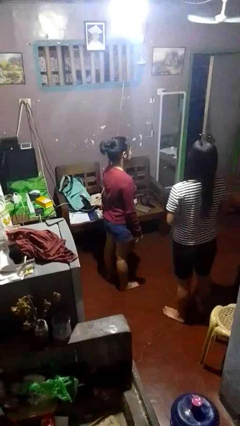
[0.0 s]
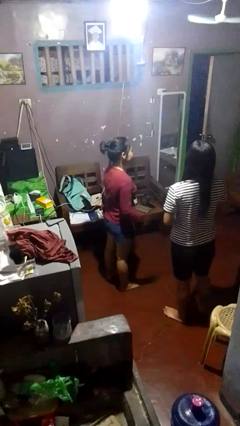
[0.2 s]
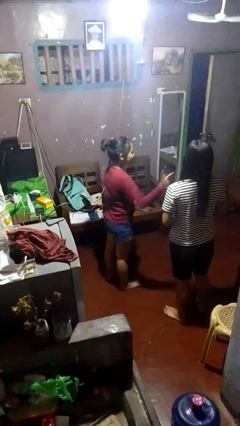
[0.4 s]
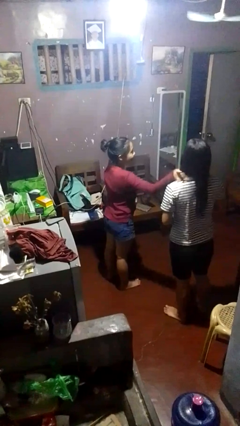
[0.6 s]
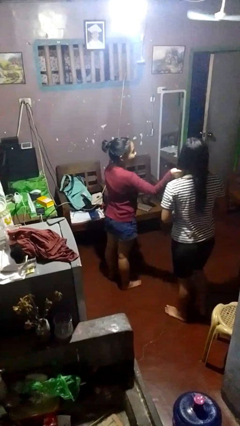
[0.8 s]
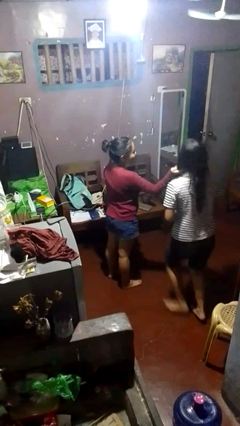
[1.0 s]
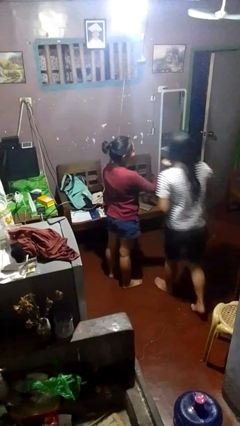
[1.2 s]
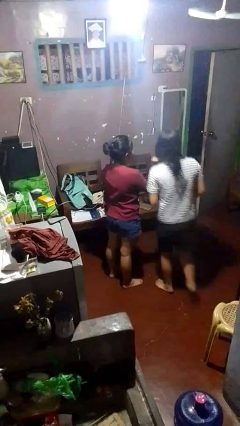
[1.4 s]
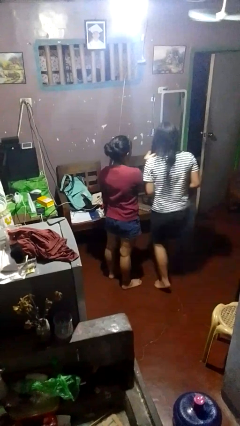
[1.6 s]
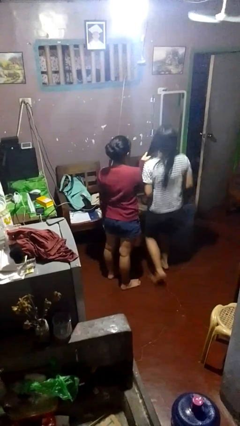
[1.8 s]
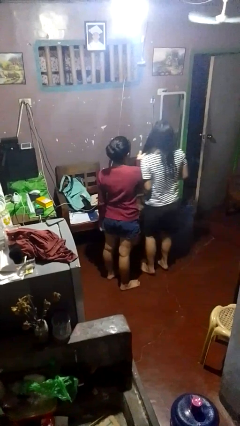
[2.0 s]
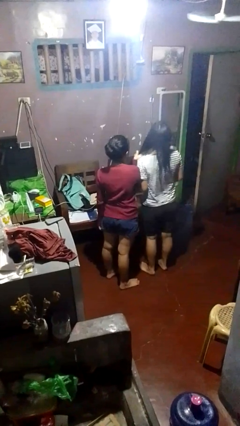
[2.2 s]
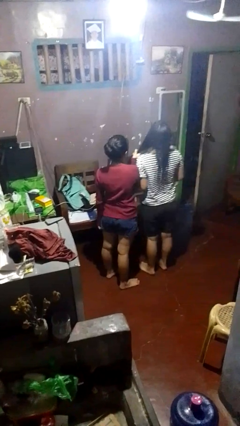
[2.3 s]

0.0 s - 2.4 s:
person grabs person by hair

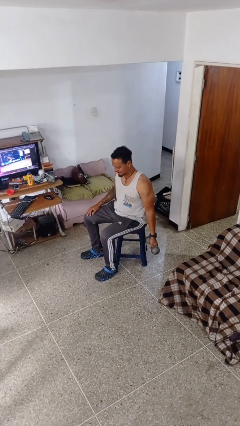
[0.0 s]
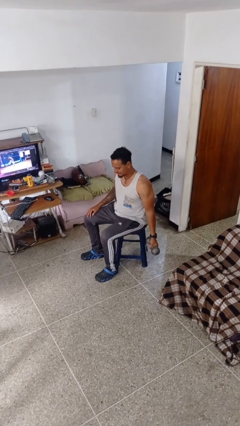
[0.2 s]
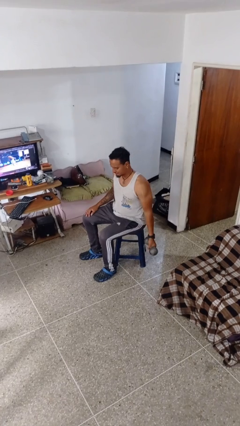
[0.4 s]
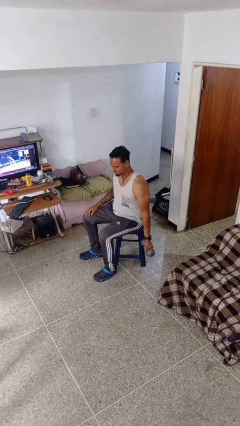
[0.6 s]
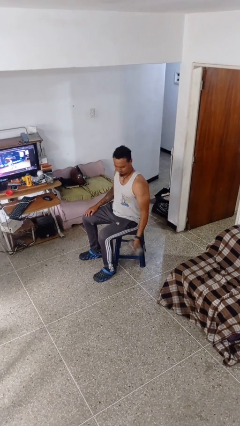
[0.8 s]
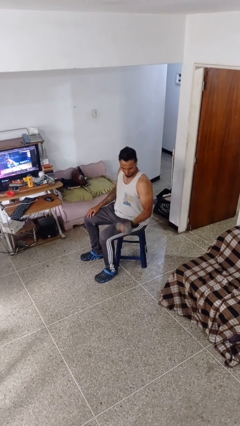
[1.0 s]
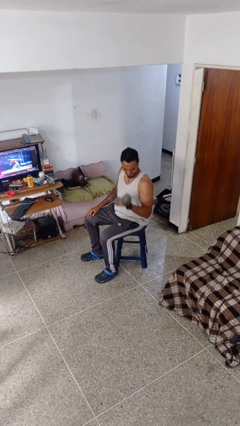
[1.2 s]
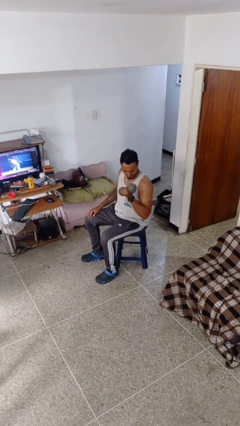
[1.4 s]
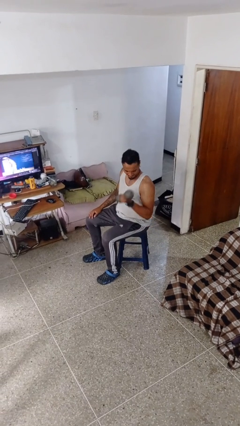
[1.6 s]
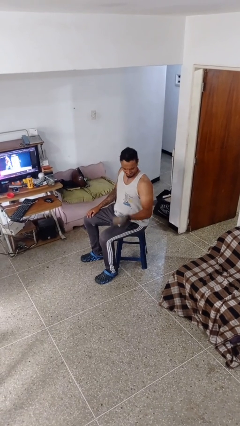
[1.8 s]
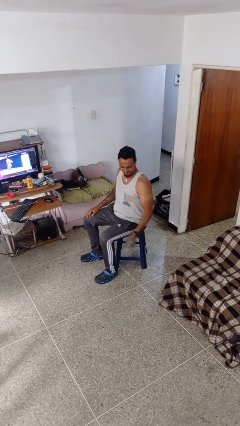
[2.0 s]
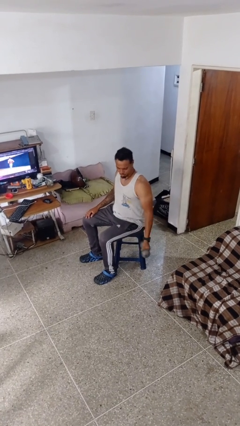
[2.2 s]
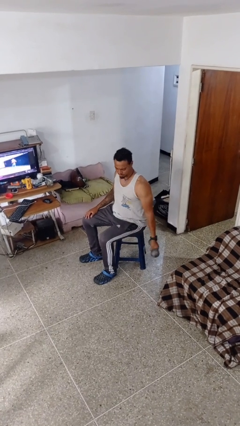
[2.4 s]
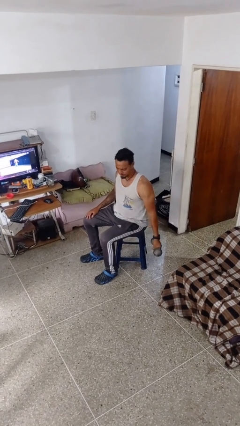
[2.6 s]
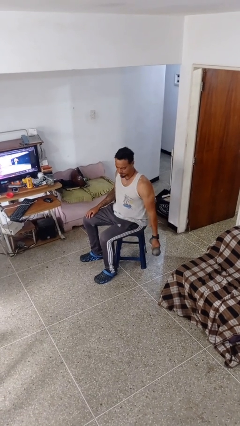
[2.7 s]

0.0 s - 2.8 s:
person lifts dumbbells

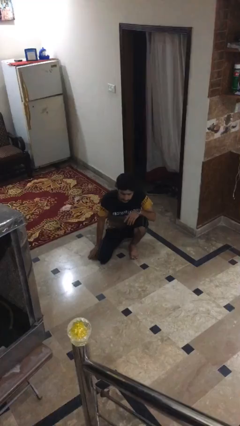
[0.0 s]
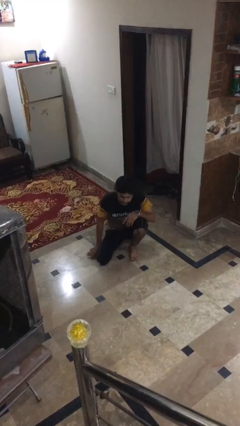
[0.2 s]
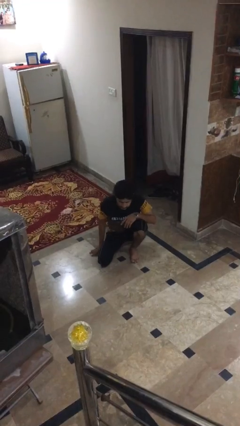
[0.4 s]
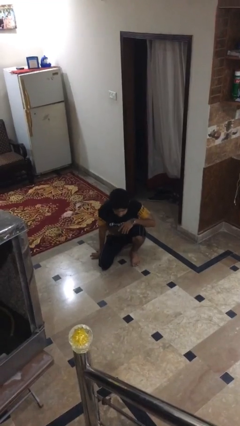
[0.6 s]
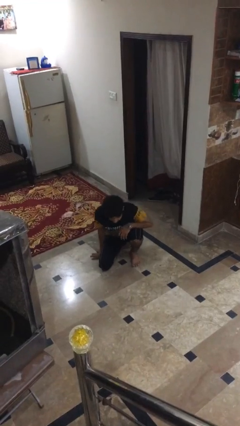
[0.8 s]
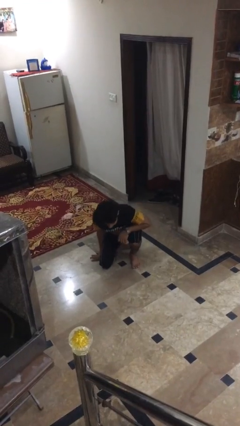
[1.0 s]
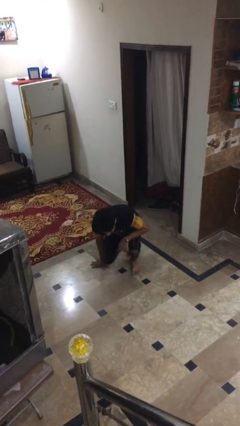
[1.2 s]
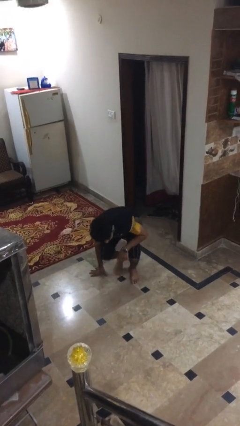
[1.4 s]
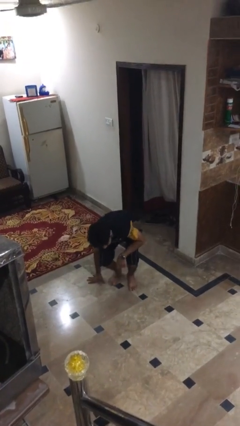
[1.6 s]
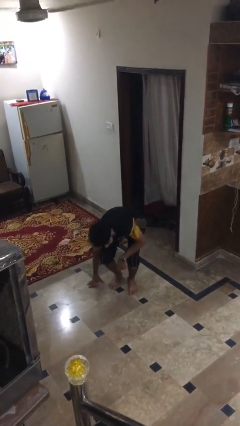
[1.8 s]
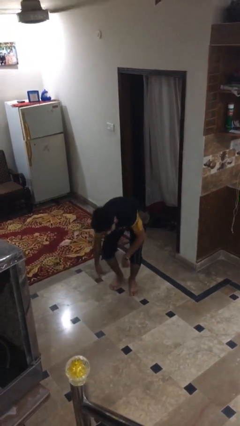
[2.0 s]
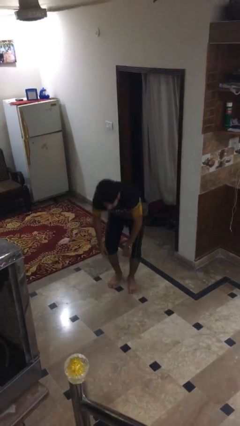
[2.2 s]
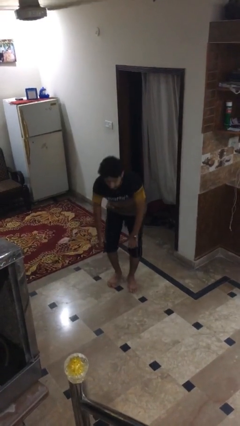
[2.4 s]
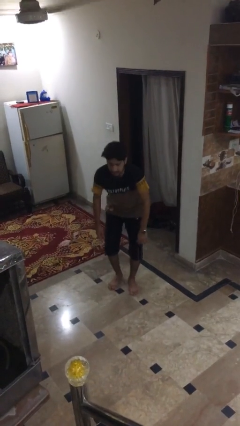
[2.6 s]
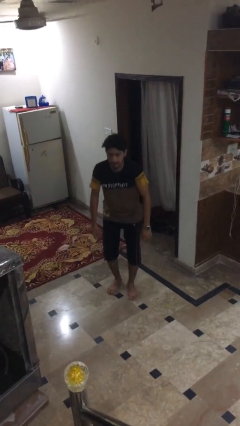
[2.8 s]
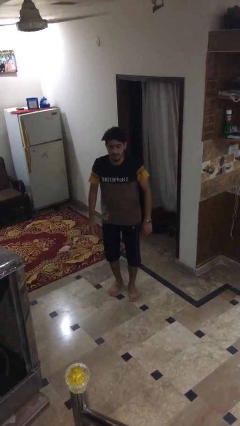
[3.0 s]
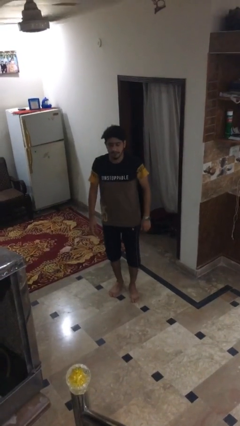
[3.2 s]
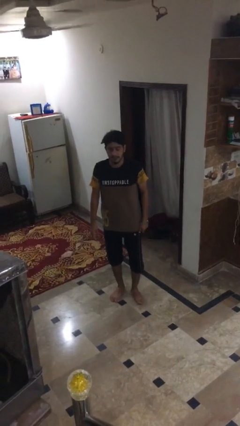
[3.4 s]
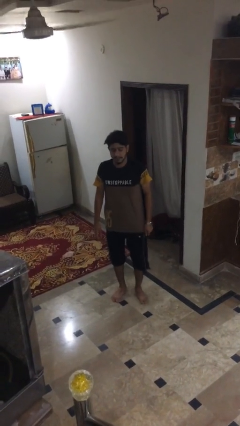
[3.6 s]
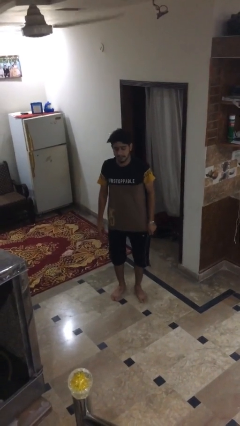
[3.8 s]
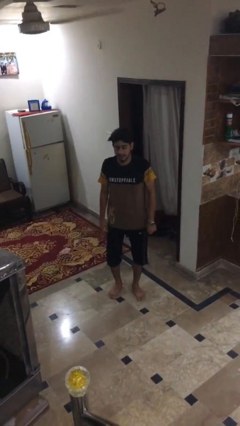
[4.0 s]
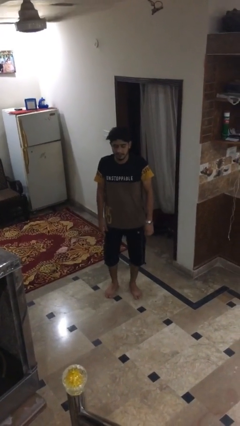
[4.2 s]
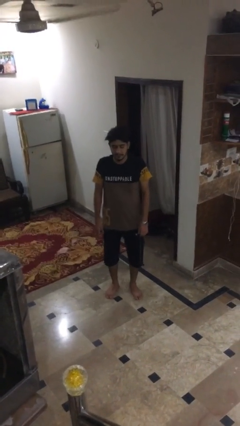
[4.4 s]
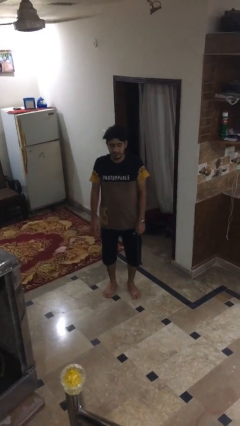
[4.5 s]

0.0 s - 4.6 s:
person stands up from floor

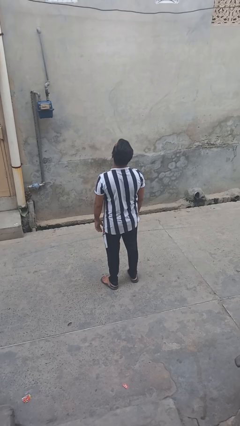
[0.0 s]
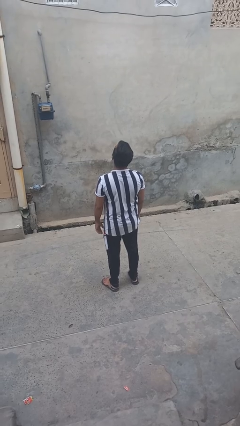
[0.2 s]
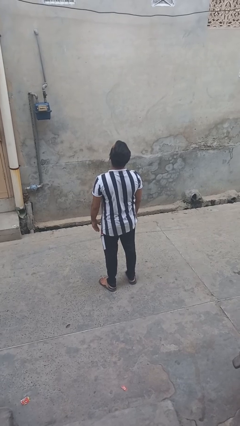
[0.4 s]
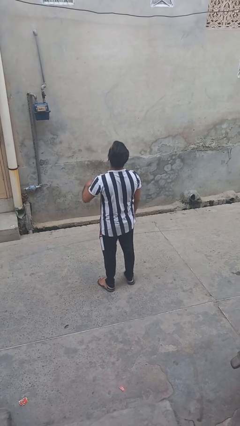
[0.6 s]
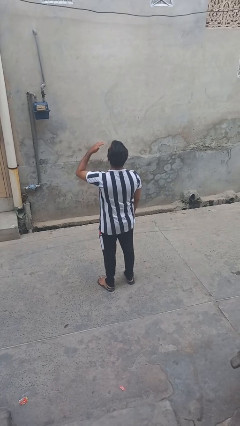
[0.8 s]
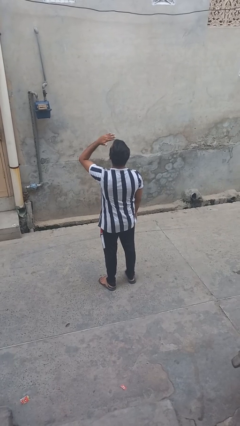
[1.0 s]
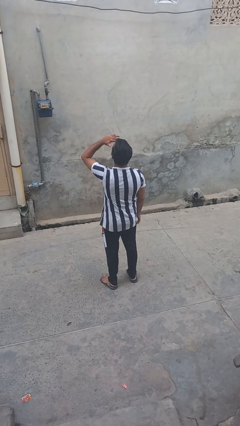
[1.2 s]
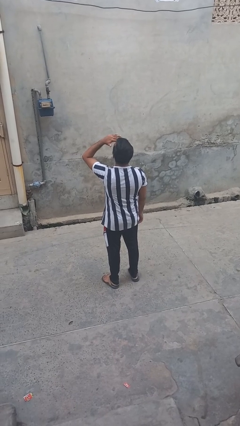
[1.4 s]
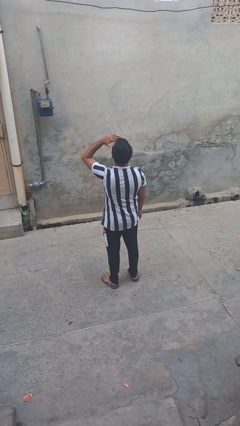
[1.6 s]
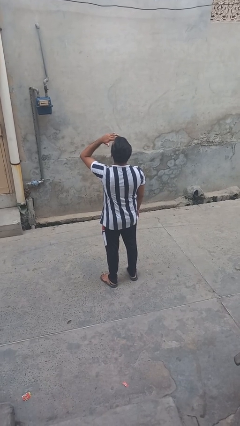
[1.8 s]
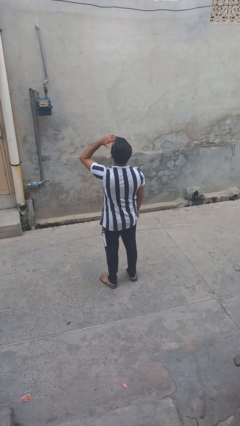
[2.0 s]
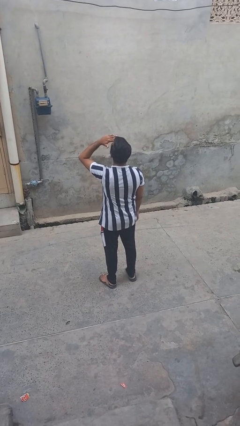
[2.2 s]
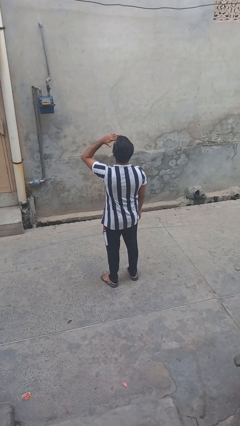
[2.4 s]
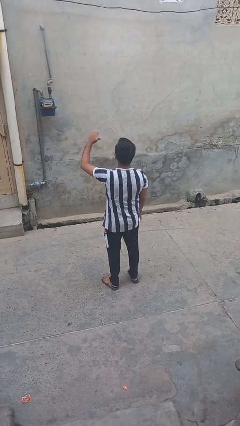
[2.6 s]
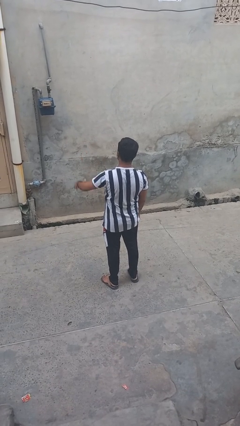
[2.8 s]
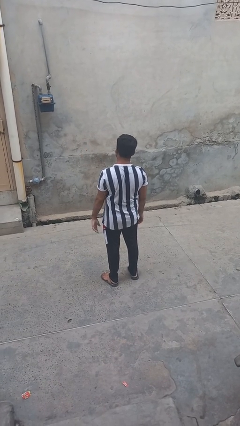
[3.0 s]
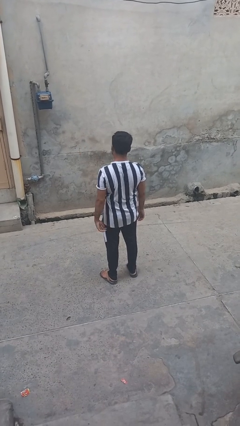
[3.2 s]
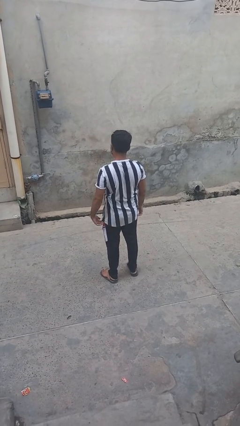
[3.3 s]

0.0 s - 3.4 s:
person shades eyes

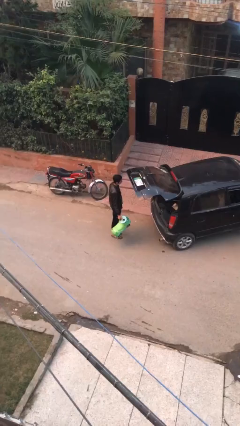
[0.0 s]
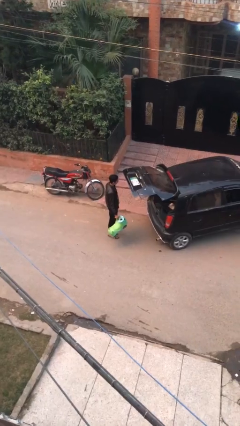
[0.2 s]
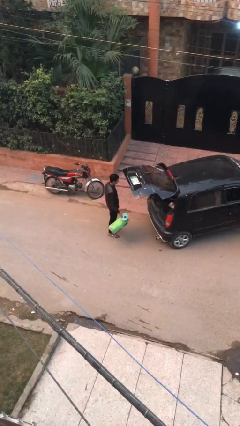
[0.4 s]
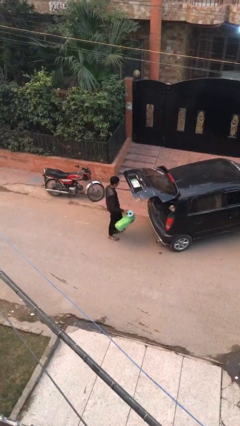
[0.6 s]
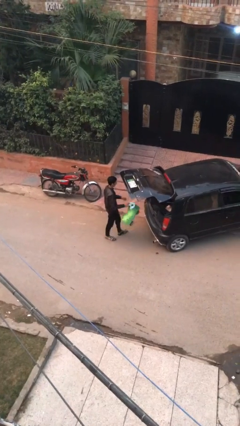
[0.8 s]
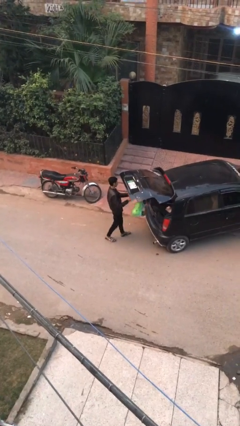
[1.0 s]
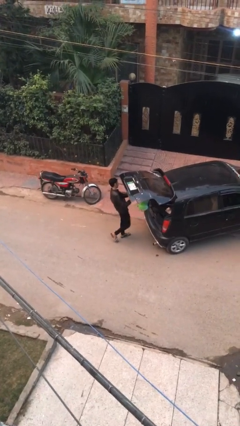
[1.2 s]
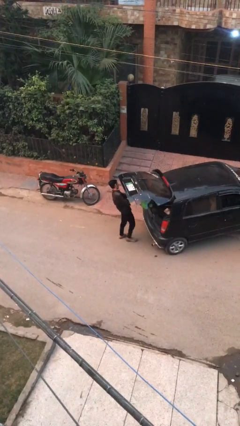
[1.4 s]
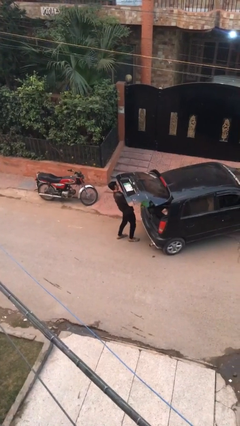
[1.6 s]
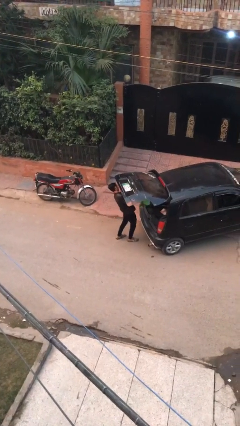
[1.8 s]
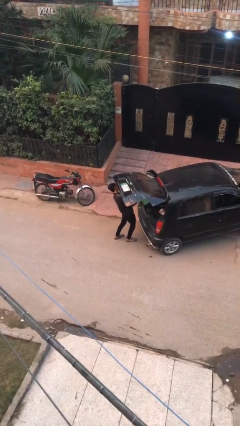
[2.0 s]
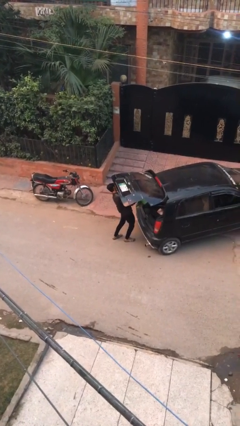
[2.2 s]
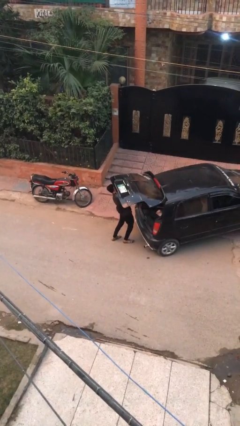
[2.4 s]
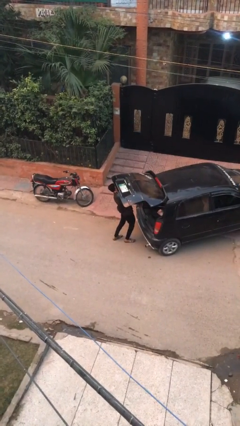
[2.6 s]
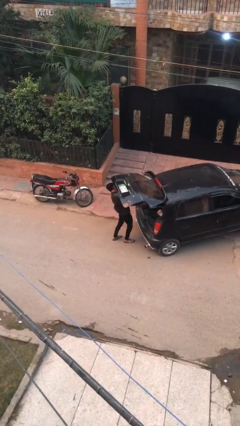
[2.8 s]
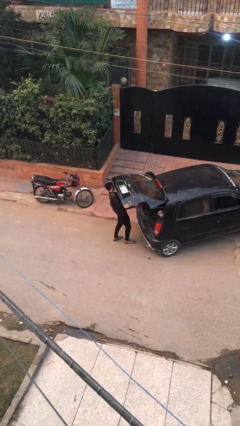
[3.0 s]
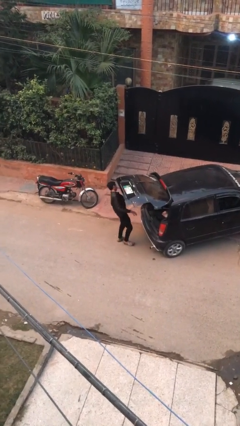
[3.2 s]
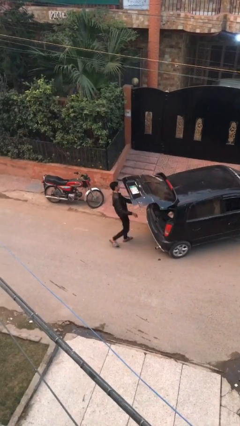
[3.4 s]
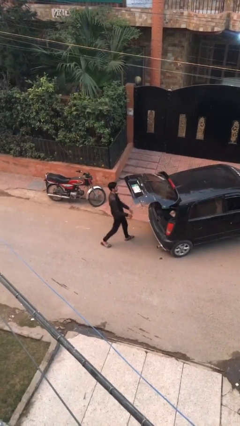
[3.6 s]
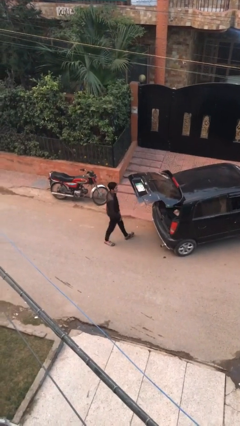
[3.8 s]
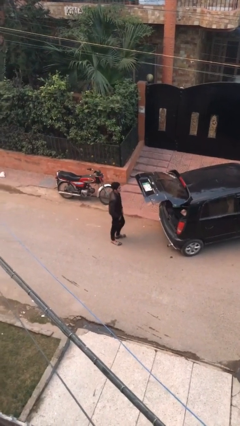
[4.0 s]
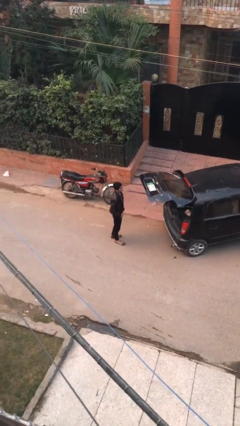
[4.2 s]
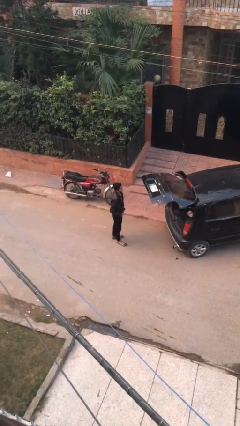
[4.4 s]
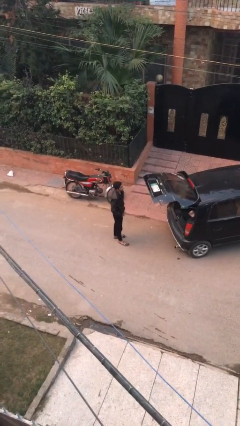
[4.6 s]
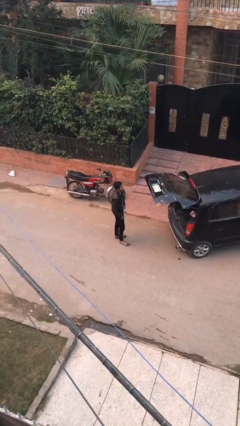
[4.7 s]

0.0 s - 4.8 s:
person loads car

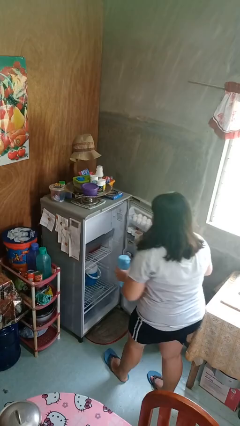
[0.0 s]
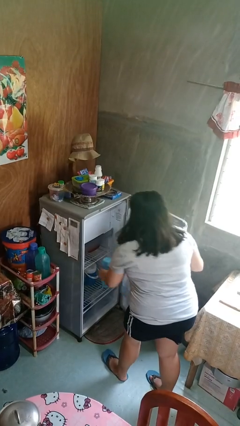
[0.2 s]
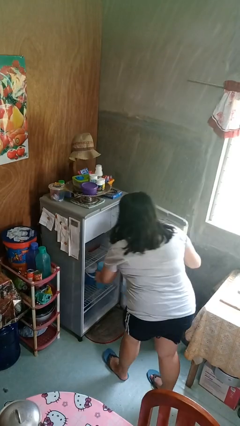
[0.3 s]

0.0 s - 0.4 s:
person puts object into refrigerator
